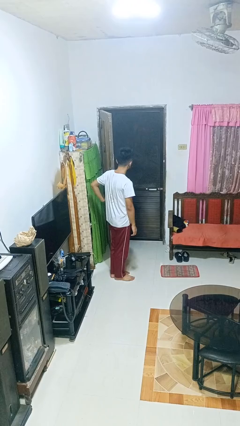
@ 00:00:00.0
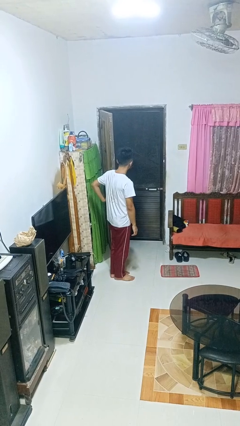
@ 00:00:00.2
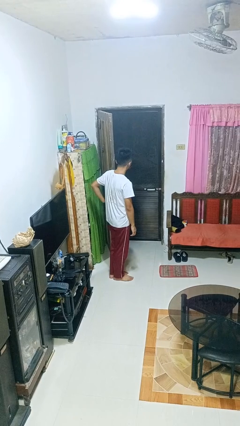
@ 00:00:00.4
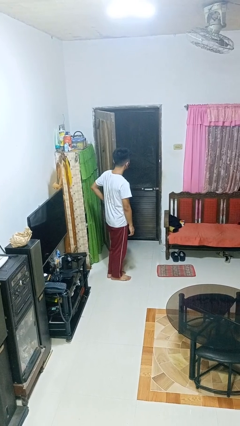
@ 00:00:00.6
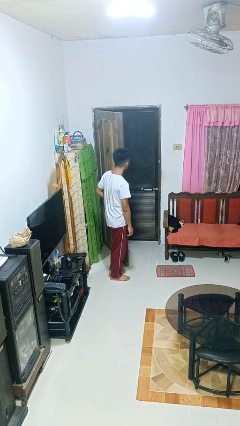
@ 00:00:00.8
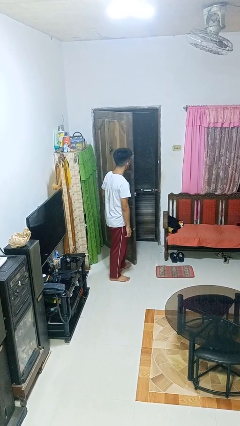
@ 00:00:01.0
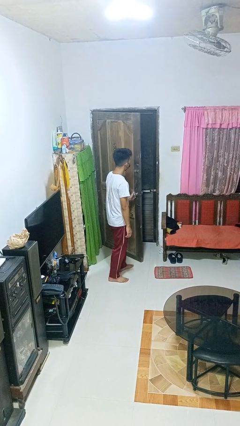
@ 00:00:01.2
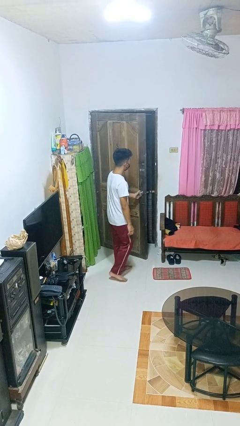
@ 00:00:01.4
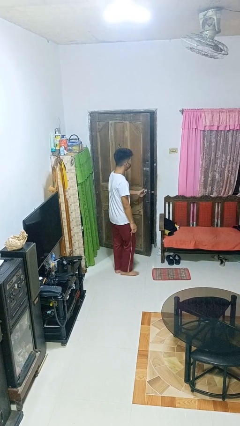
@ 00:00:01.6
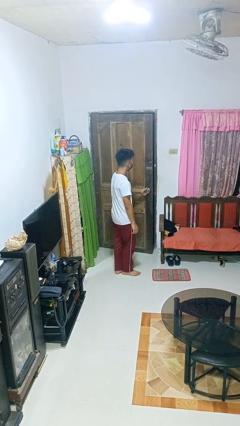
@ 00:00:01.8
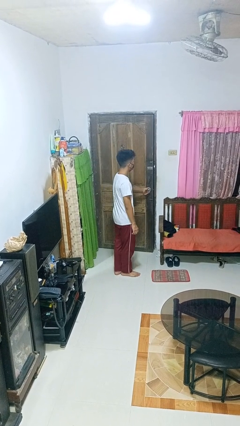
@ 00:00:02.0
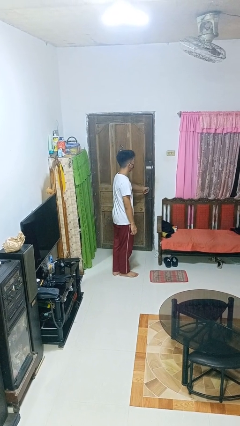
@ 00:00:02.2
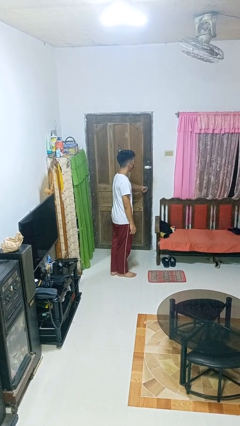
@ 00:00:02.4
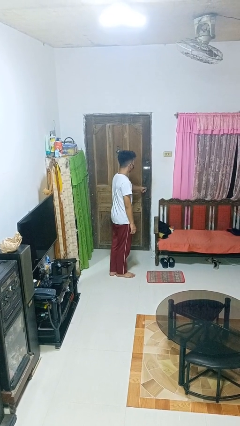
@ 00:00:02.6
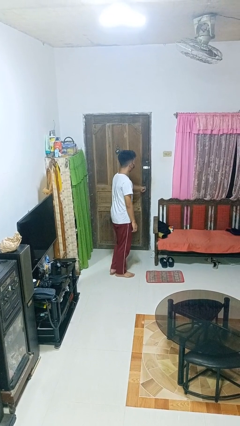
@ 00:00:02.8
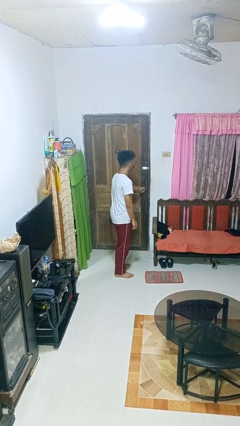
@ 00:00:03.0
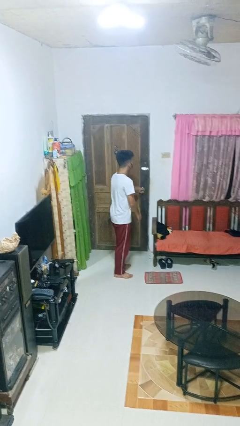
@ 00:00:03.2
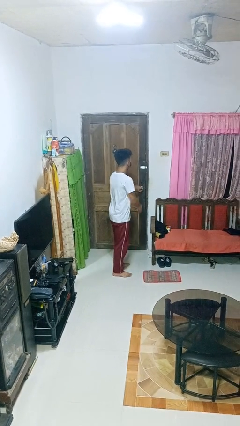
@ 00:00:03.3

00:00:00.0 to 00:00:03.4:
person closes facility door

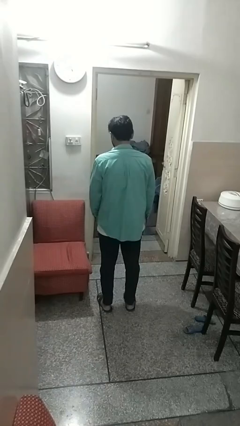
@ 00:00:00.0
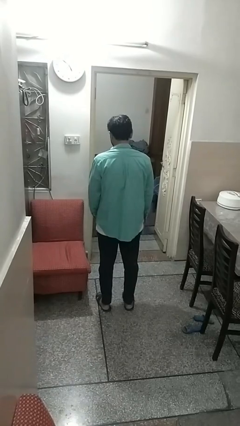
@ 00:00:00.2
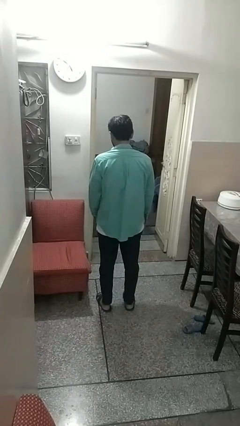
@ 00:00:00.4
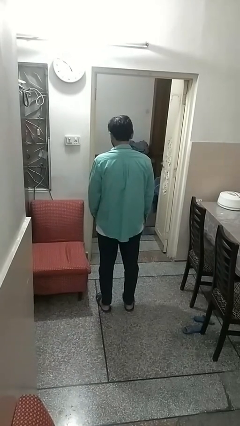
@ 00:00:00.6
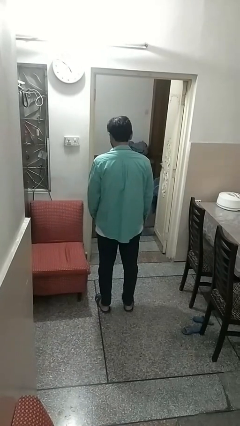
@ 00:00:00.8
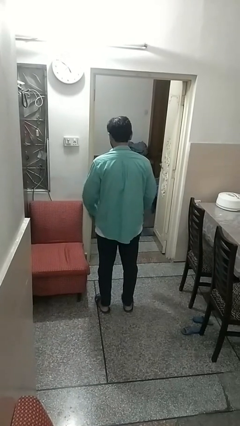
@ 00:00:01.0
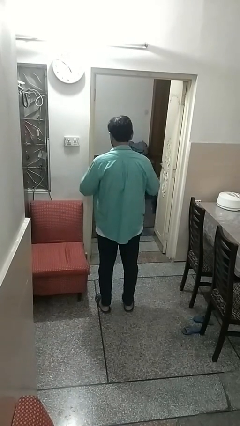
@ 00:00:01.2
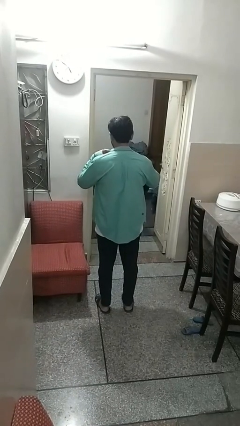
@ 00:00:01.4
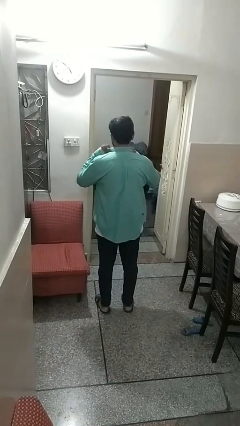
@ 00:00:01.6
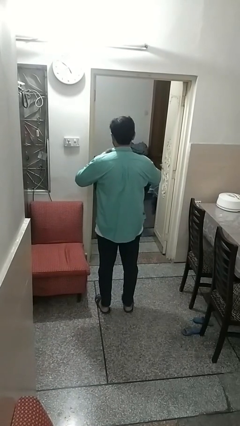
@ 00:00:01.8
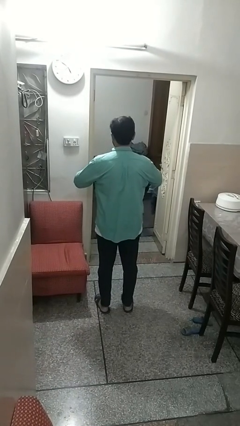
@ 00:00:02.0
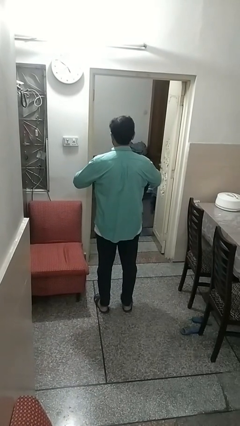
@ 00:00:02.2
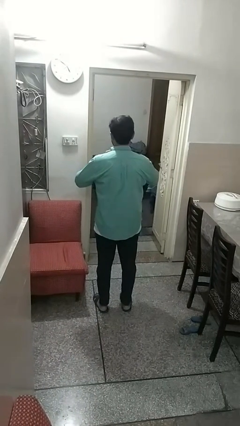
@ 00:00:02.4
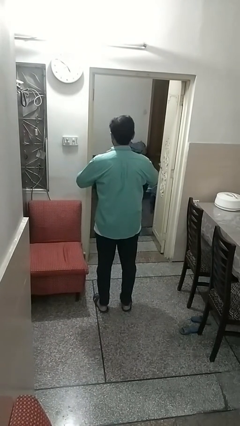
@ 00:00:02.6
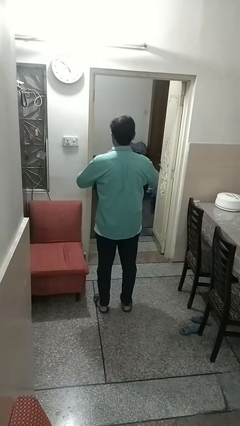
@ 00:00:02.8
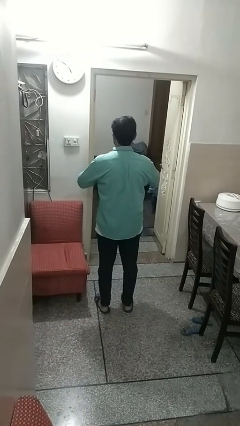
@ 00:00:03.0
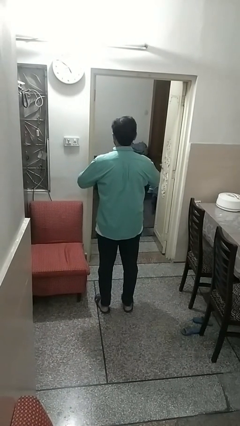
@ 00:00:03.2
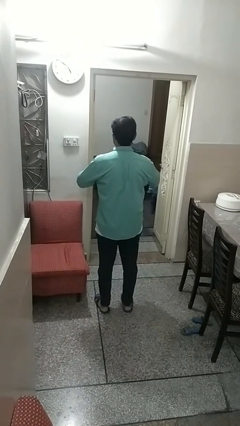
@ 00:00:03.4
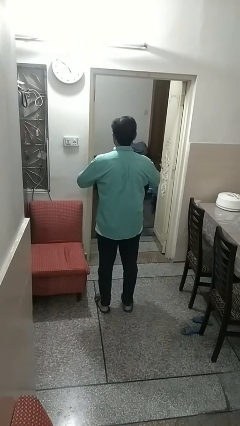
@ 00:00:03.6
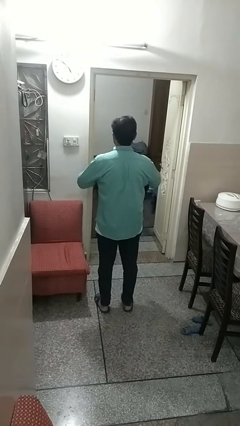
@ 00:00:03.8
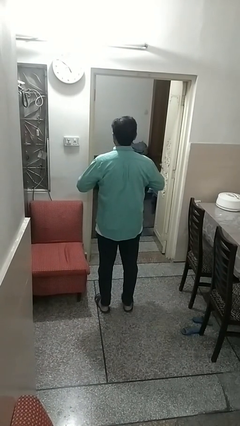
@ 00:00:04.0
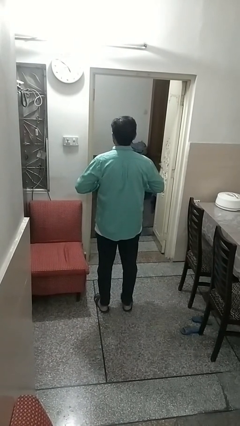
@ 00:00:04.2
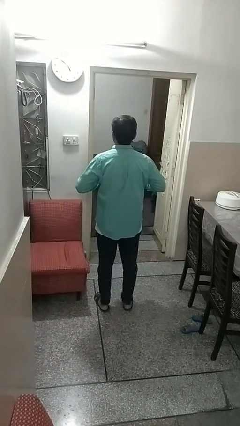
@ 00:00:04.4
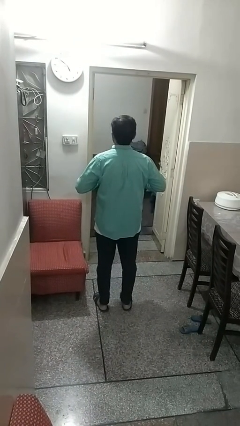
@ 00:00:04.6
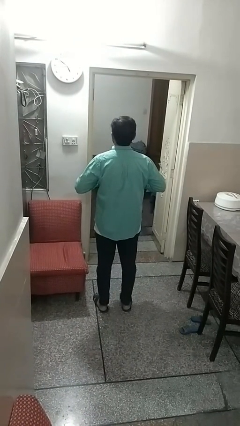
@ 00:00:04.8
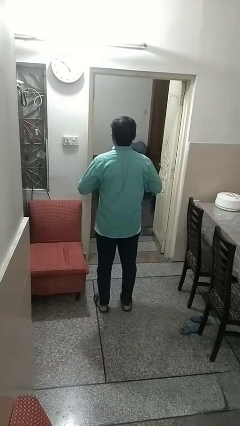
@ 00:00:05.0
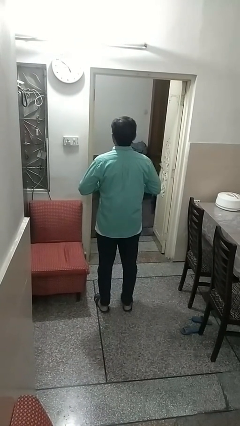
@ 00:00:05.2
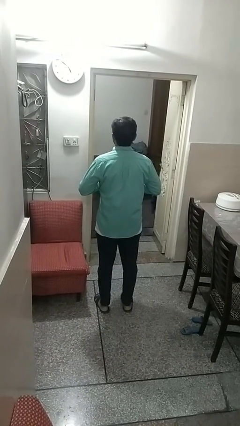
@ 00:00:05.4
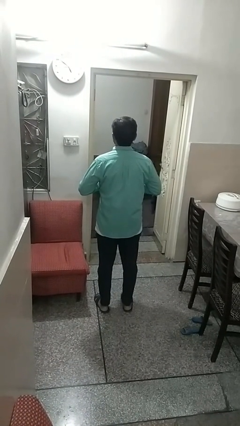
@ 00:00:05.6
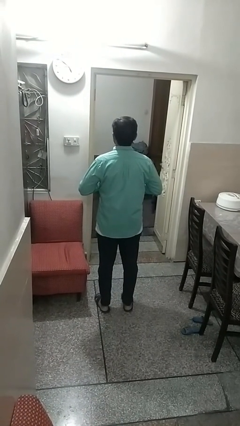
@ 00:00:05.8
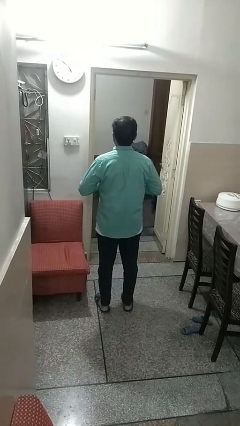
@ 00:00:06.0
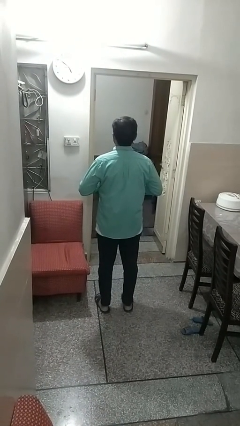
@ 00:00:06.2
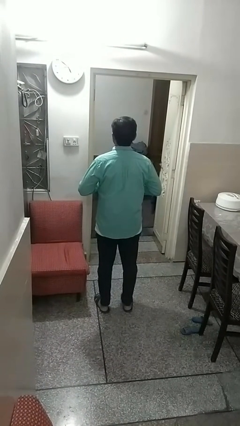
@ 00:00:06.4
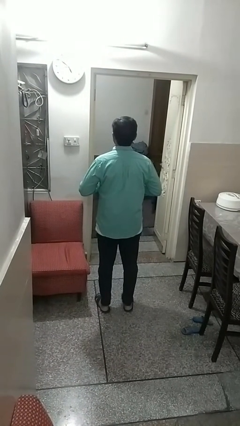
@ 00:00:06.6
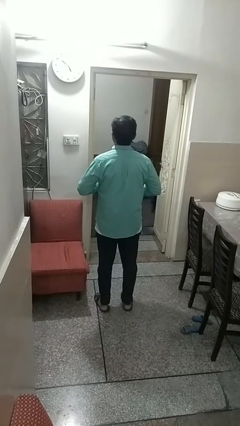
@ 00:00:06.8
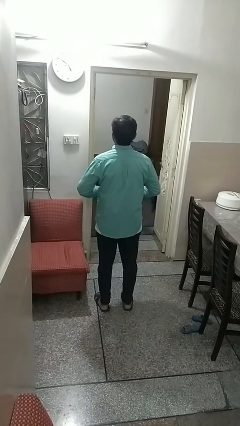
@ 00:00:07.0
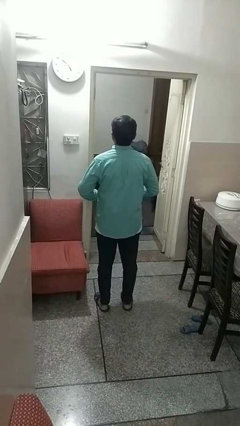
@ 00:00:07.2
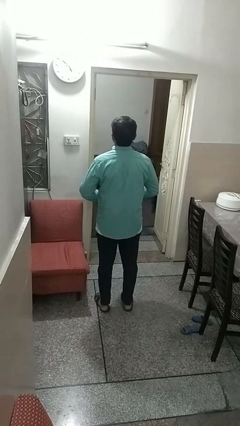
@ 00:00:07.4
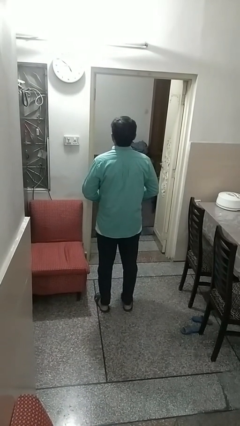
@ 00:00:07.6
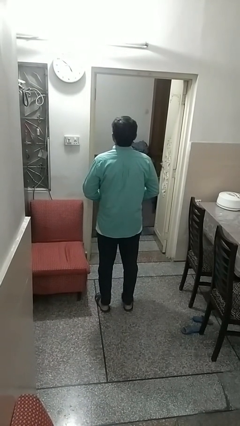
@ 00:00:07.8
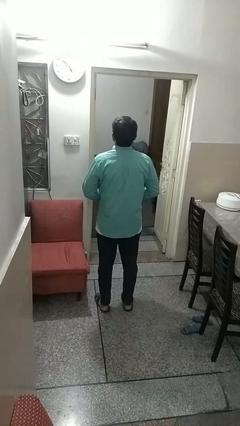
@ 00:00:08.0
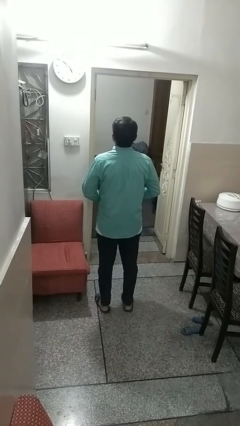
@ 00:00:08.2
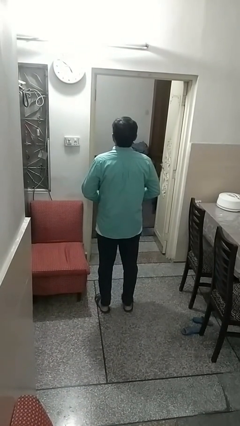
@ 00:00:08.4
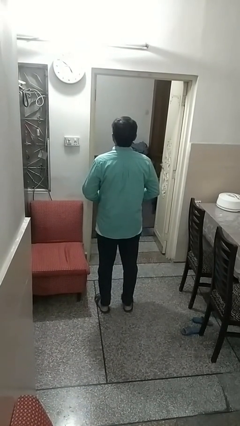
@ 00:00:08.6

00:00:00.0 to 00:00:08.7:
person buttons shirt

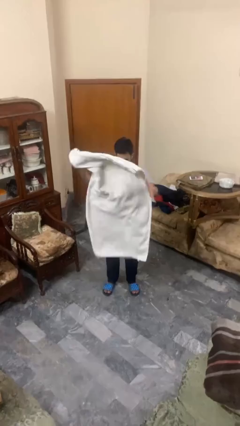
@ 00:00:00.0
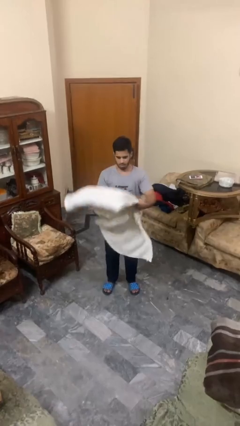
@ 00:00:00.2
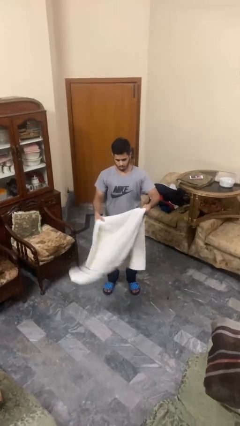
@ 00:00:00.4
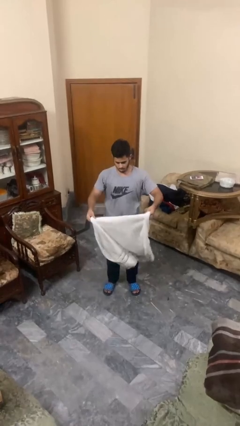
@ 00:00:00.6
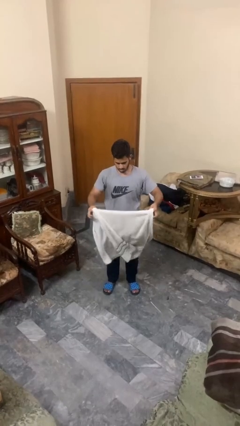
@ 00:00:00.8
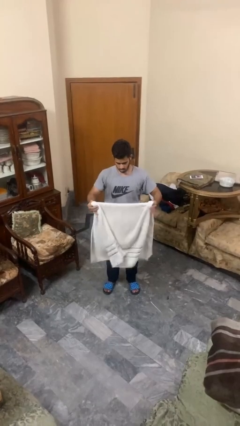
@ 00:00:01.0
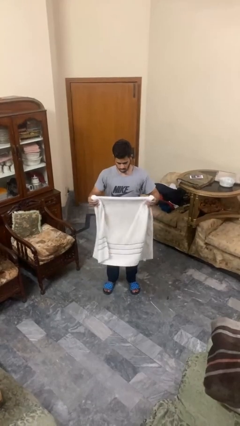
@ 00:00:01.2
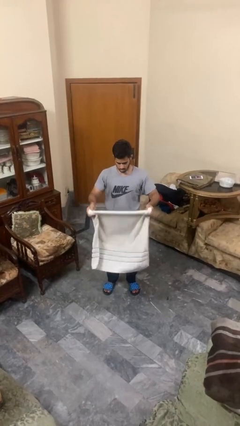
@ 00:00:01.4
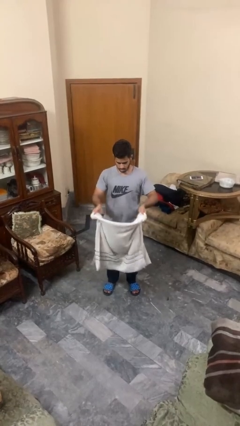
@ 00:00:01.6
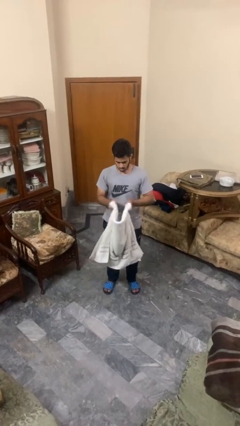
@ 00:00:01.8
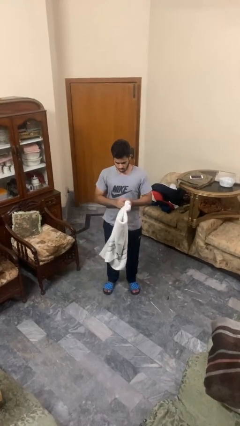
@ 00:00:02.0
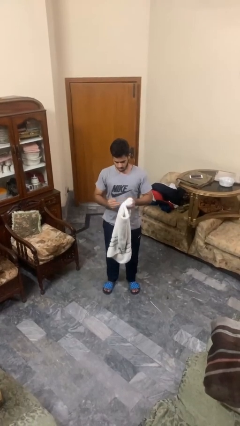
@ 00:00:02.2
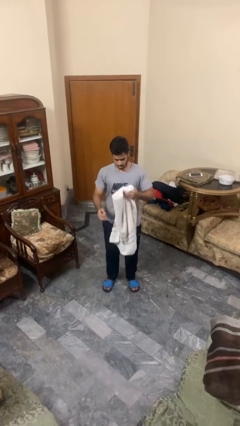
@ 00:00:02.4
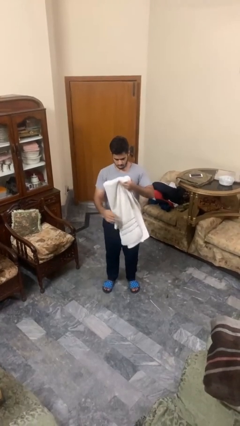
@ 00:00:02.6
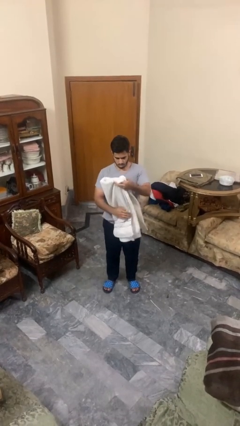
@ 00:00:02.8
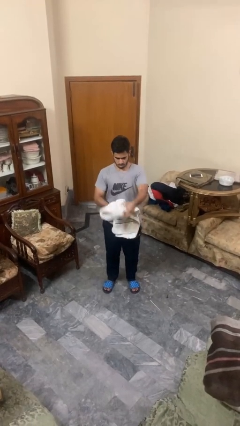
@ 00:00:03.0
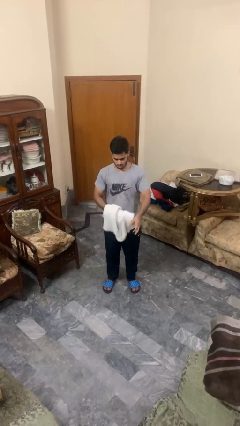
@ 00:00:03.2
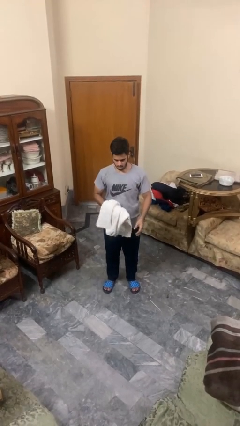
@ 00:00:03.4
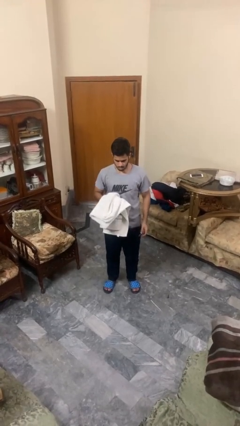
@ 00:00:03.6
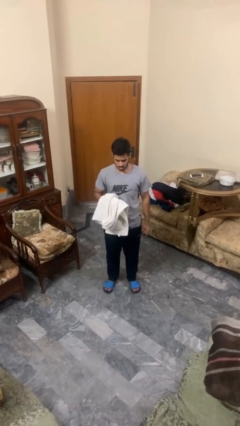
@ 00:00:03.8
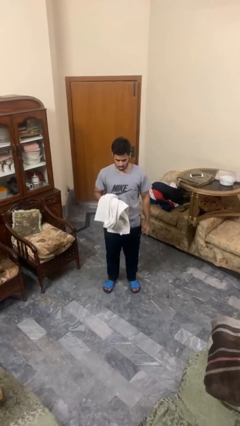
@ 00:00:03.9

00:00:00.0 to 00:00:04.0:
person folds towel

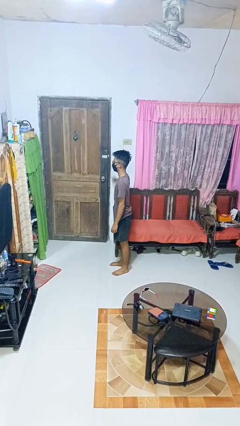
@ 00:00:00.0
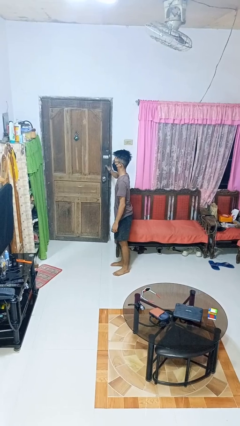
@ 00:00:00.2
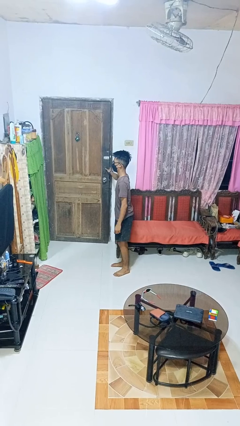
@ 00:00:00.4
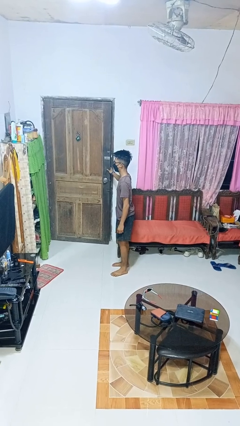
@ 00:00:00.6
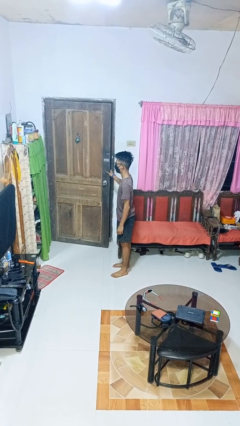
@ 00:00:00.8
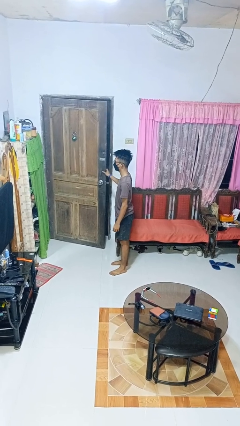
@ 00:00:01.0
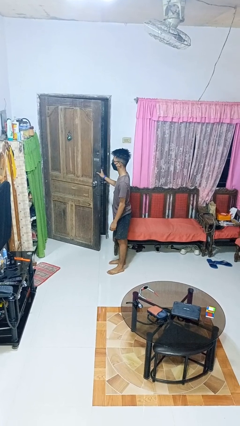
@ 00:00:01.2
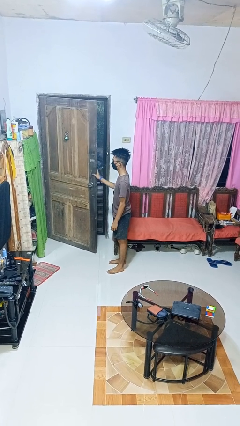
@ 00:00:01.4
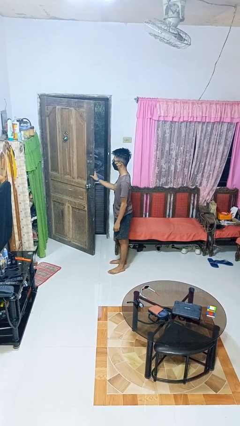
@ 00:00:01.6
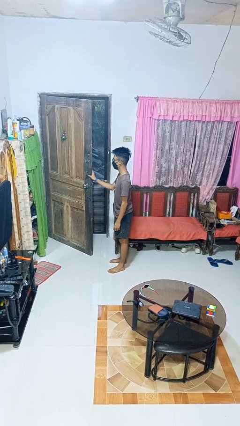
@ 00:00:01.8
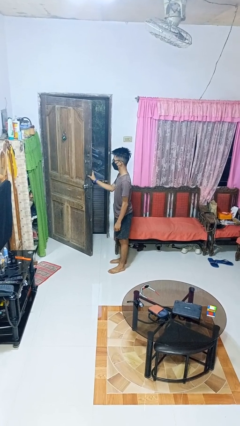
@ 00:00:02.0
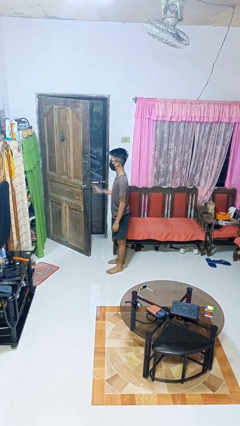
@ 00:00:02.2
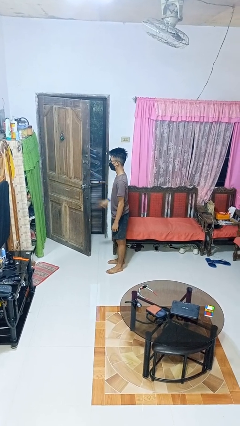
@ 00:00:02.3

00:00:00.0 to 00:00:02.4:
person opens facility door
